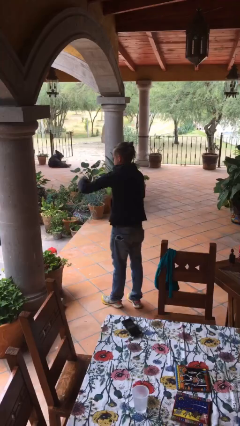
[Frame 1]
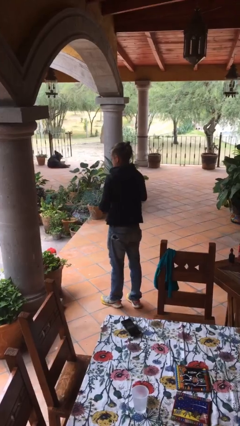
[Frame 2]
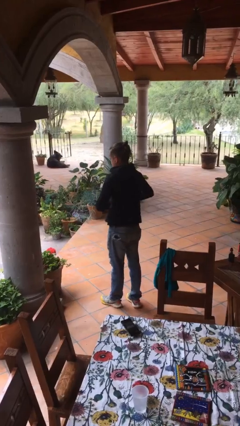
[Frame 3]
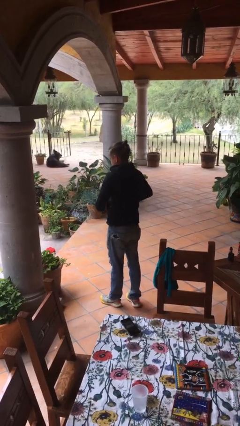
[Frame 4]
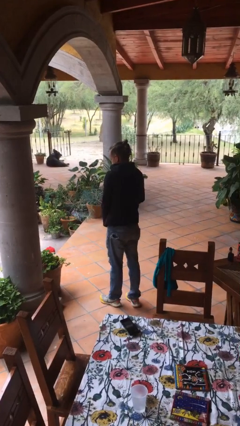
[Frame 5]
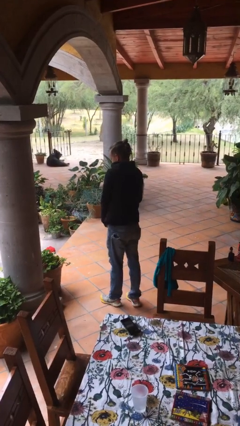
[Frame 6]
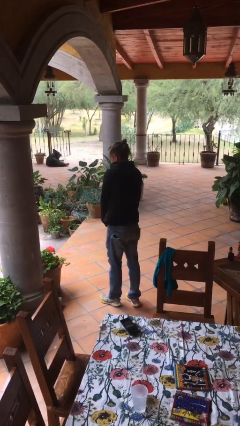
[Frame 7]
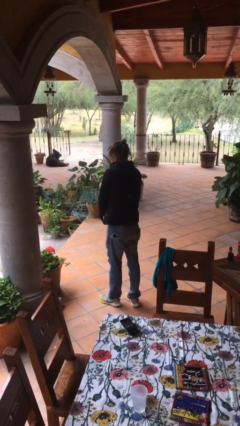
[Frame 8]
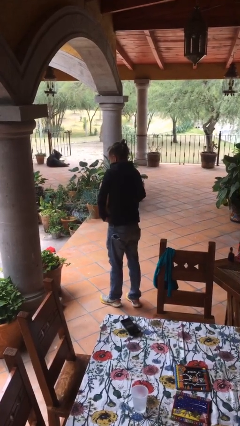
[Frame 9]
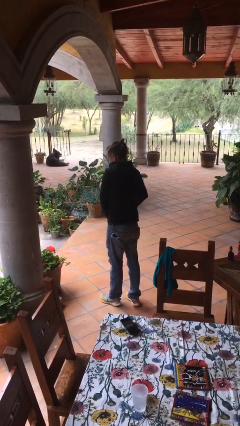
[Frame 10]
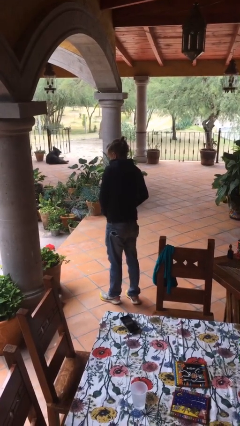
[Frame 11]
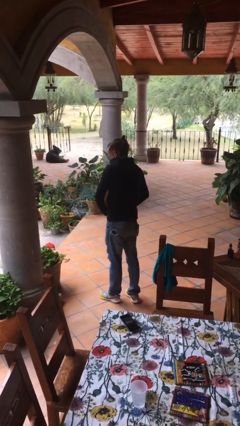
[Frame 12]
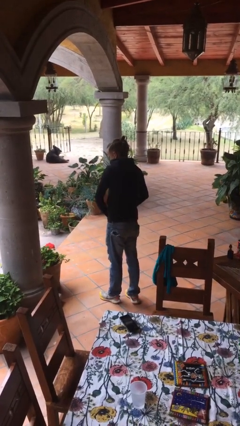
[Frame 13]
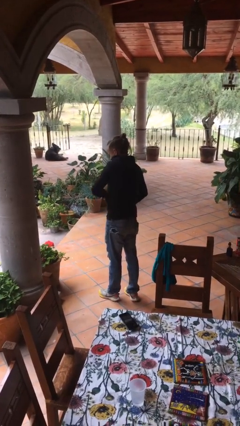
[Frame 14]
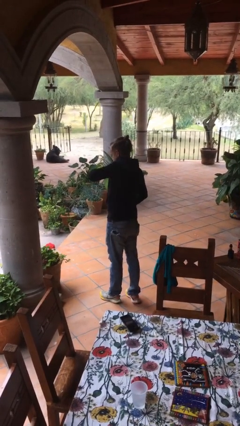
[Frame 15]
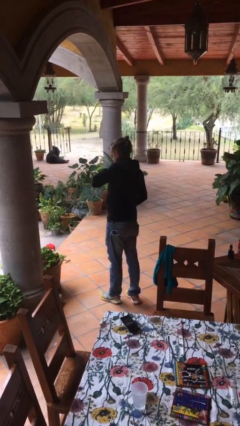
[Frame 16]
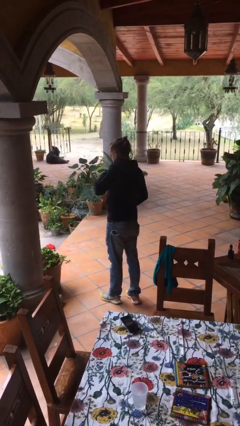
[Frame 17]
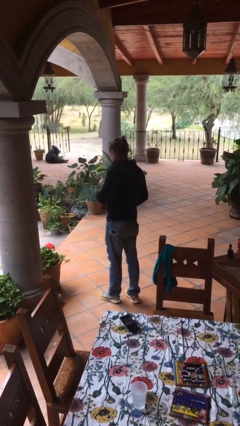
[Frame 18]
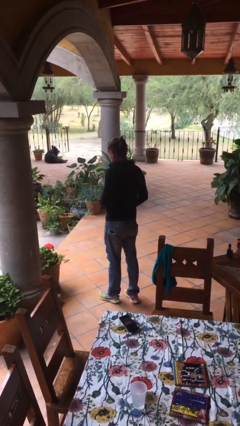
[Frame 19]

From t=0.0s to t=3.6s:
person zips up jacket

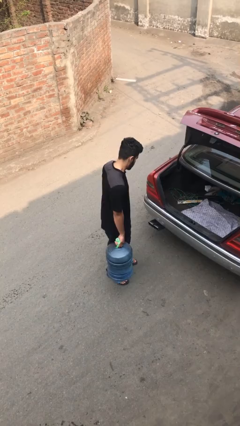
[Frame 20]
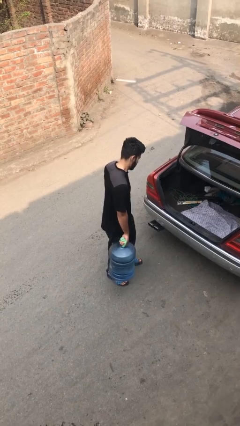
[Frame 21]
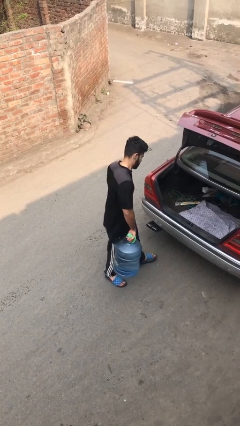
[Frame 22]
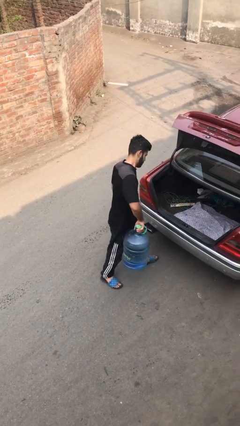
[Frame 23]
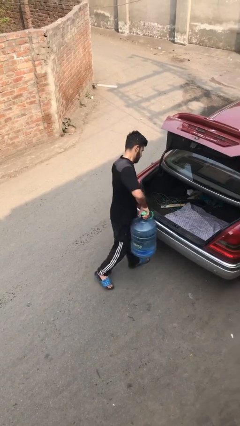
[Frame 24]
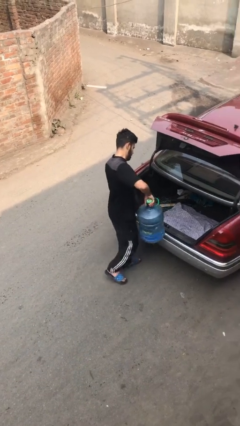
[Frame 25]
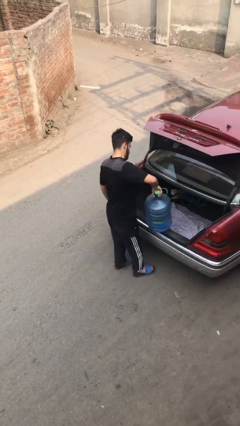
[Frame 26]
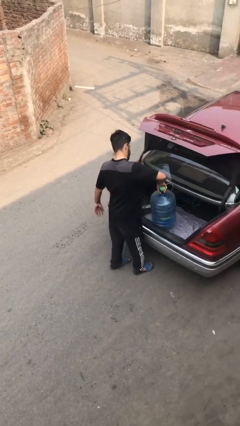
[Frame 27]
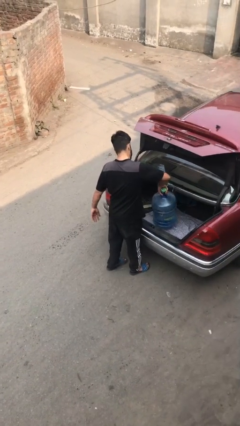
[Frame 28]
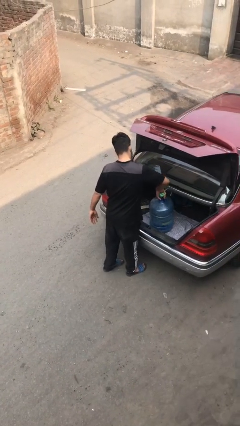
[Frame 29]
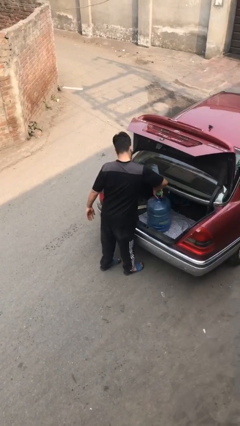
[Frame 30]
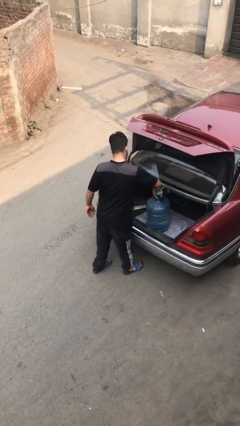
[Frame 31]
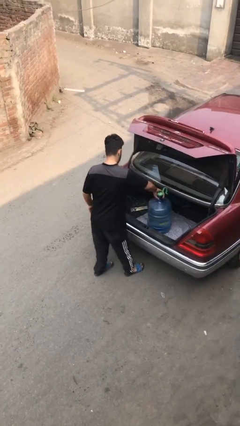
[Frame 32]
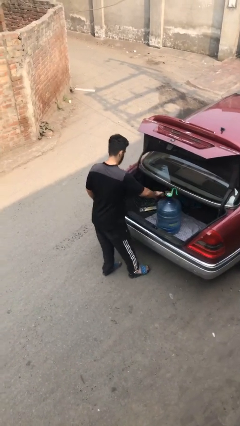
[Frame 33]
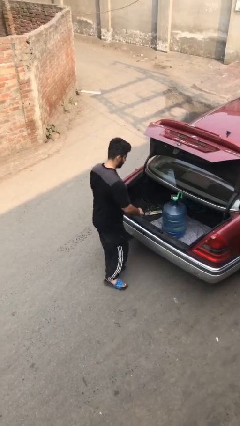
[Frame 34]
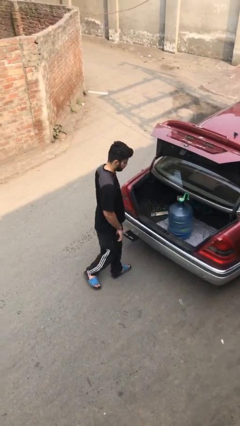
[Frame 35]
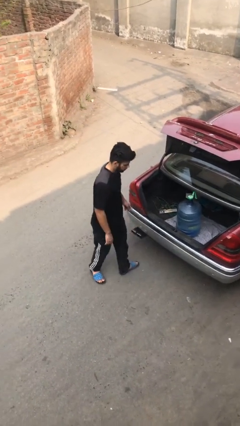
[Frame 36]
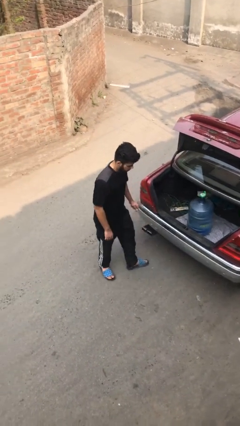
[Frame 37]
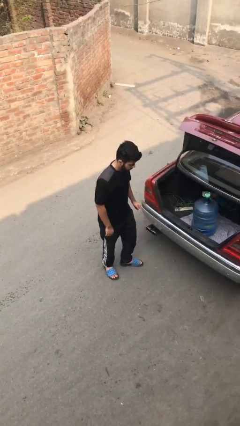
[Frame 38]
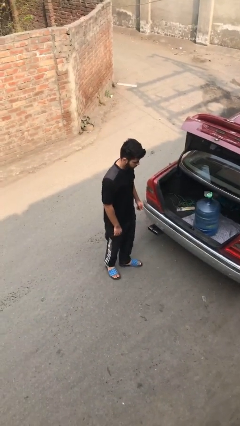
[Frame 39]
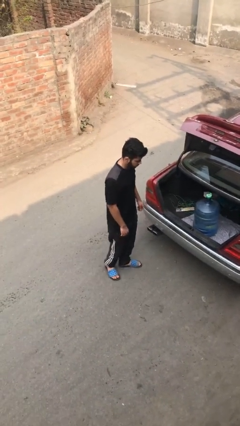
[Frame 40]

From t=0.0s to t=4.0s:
person loads car

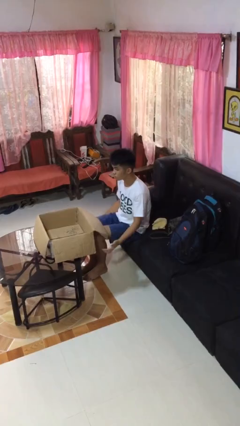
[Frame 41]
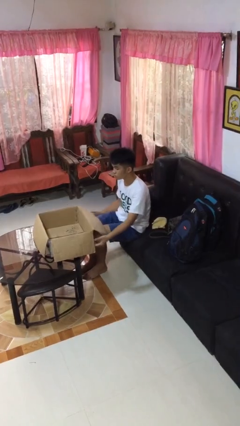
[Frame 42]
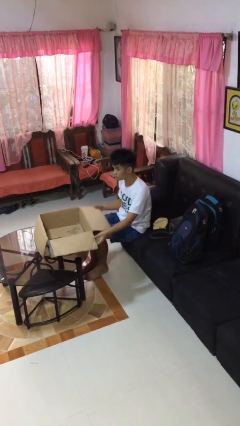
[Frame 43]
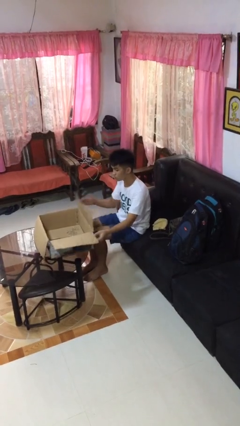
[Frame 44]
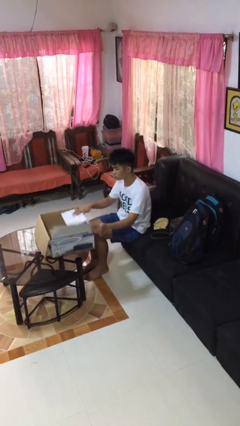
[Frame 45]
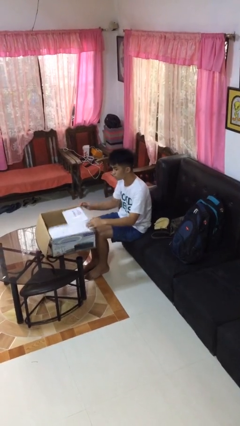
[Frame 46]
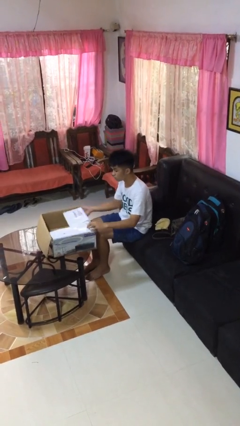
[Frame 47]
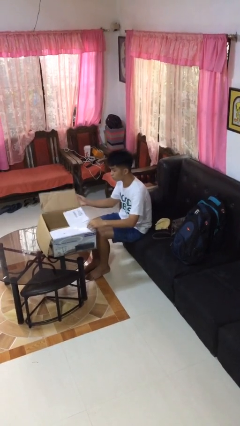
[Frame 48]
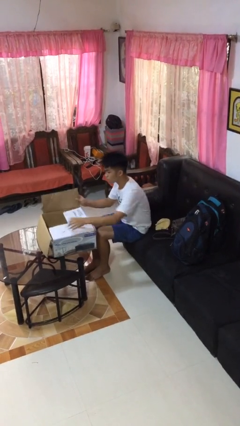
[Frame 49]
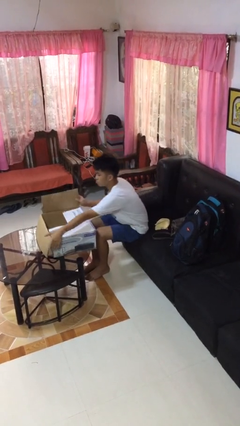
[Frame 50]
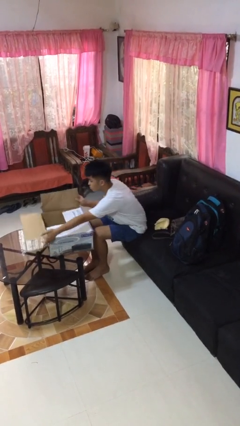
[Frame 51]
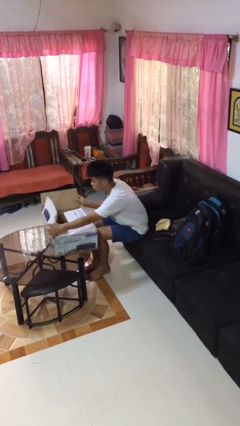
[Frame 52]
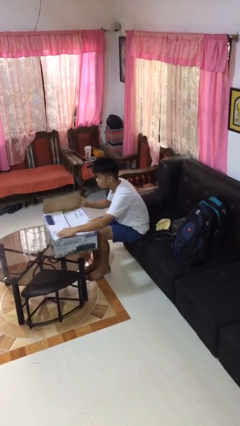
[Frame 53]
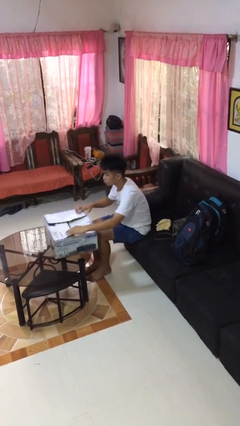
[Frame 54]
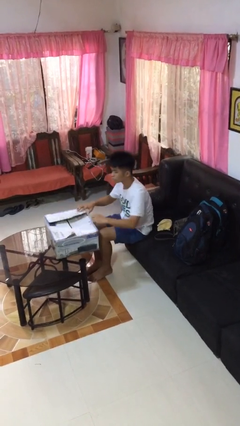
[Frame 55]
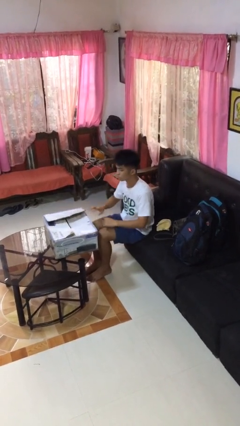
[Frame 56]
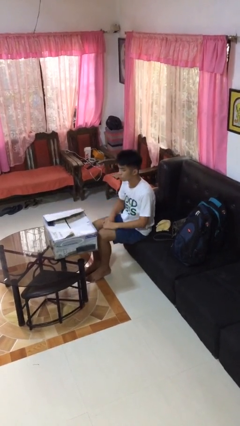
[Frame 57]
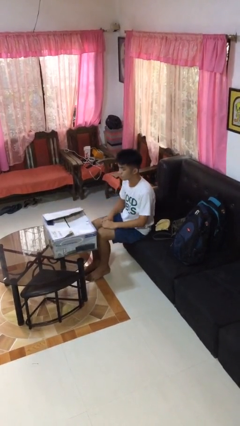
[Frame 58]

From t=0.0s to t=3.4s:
person closes box

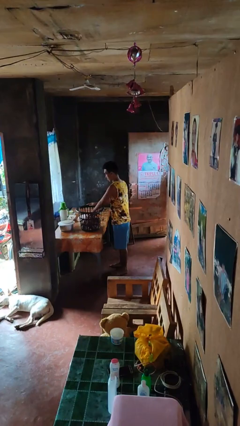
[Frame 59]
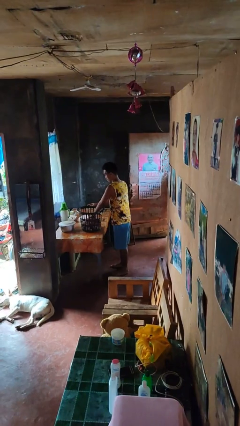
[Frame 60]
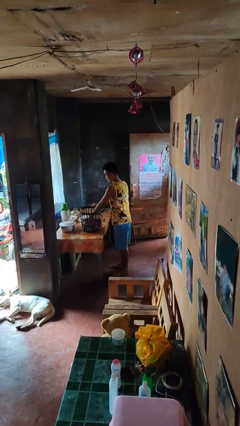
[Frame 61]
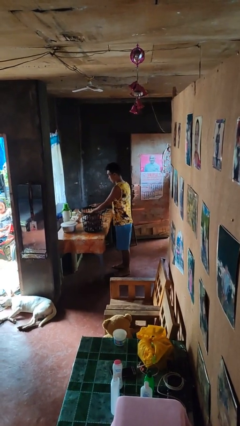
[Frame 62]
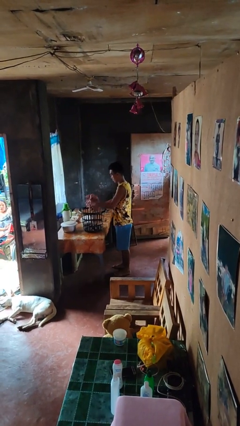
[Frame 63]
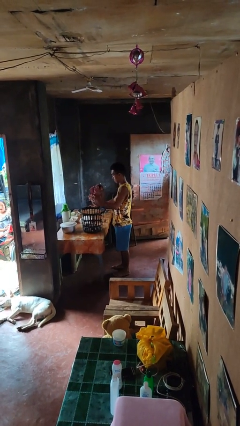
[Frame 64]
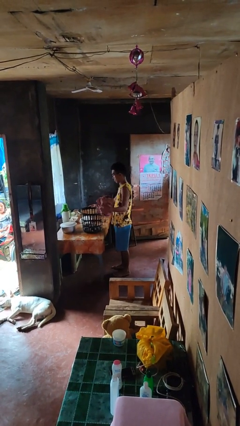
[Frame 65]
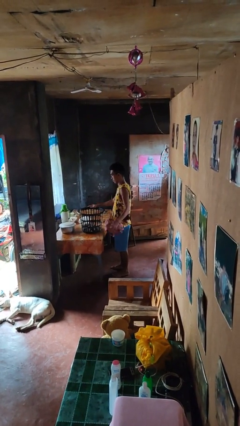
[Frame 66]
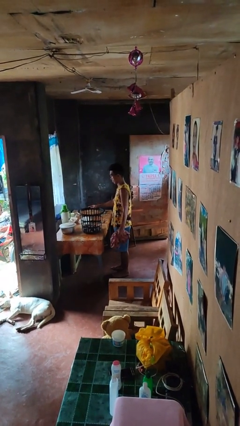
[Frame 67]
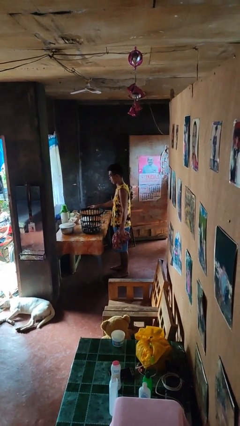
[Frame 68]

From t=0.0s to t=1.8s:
person takes object from basket

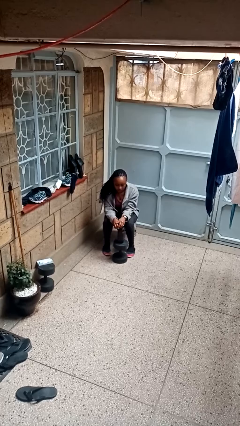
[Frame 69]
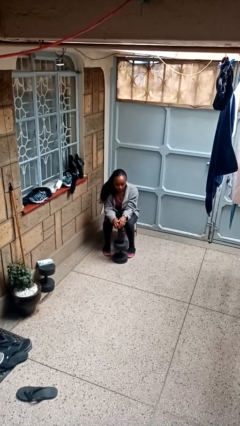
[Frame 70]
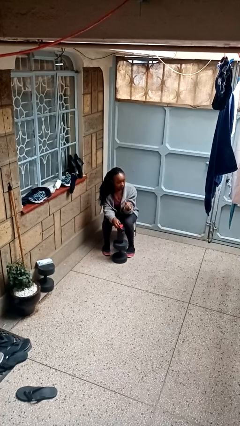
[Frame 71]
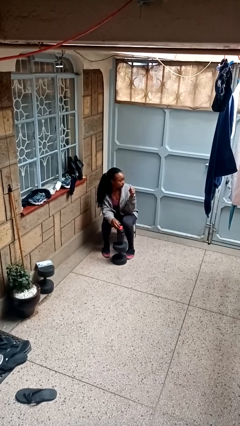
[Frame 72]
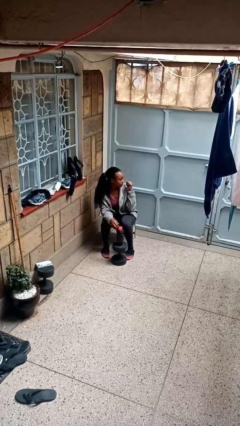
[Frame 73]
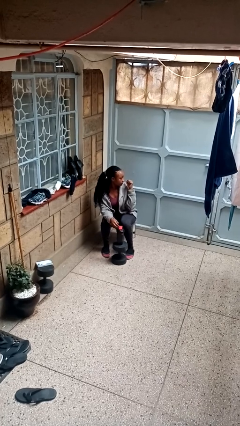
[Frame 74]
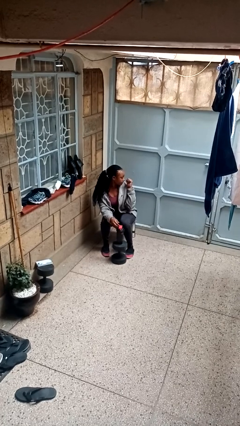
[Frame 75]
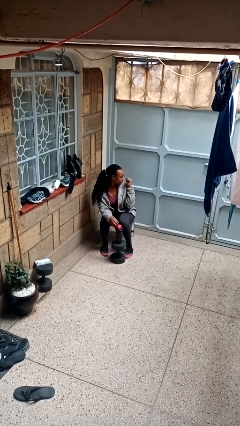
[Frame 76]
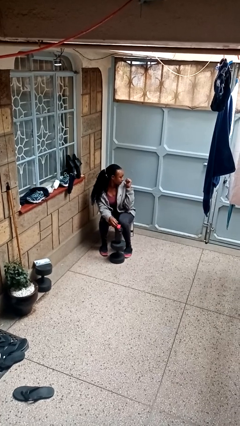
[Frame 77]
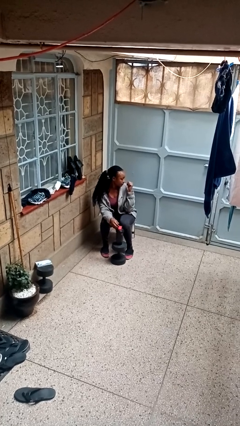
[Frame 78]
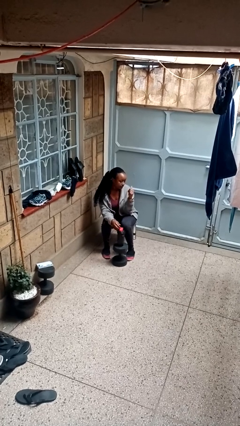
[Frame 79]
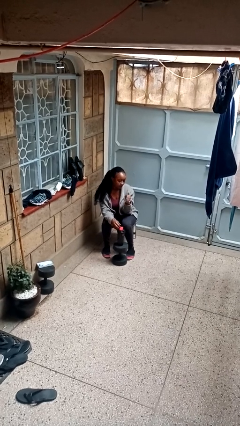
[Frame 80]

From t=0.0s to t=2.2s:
person gestures behind me

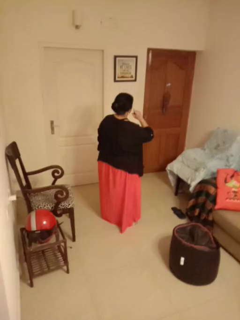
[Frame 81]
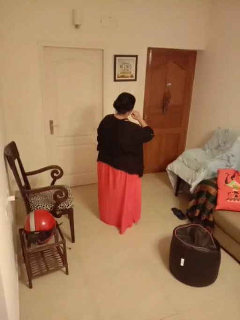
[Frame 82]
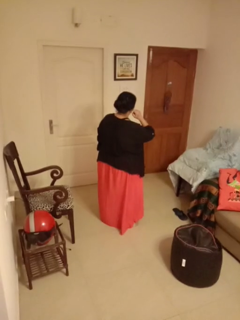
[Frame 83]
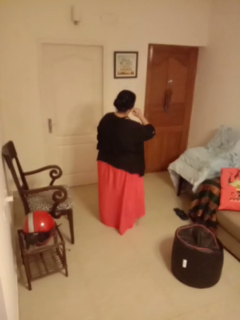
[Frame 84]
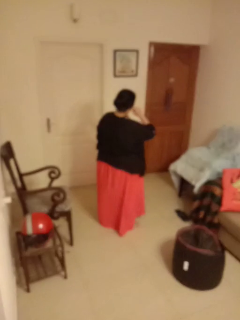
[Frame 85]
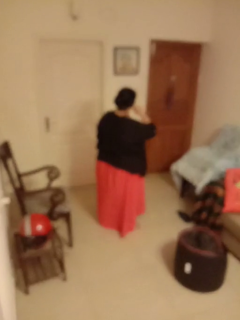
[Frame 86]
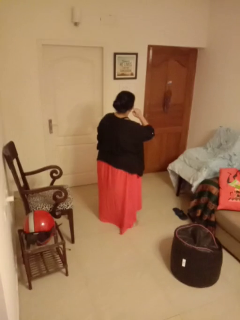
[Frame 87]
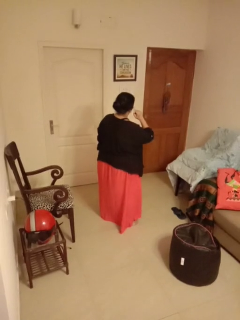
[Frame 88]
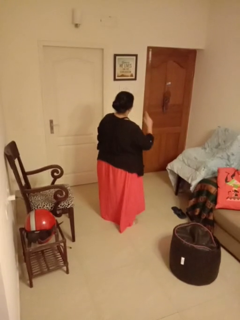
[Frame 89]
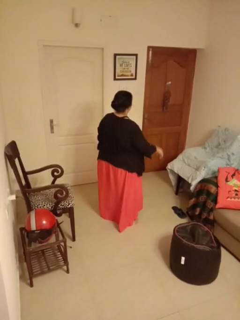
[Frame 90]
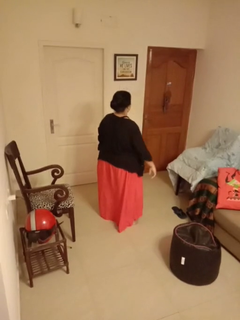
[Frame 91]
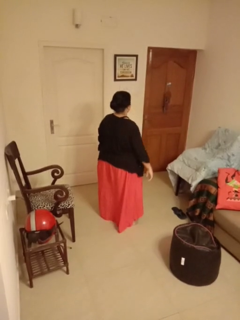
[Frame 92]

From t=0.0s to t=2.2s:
person gestures listen closely

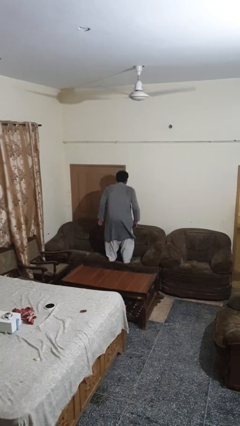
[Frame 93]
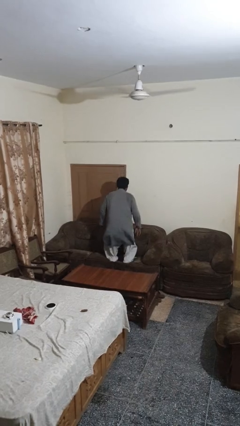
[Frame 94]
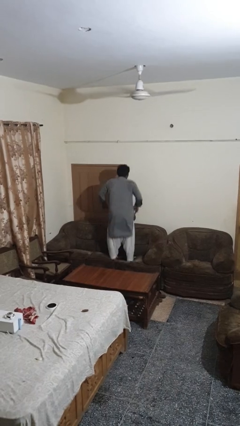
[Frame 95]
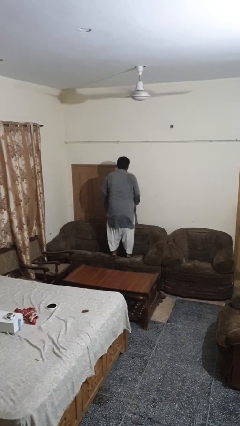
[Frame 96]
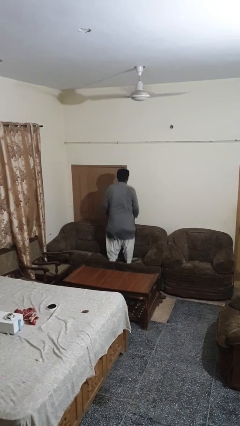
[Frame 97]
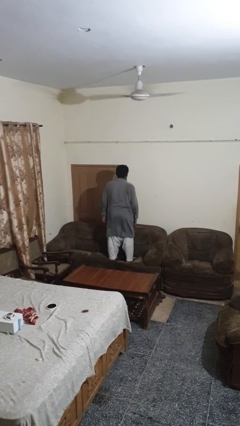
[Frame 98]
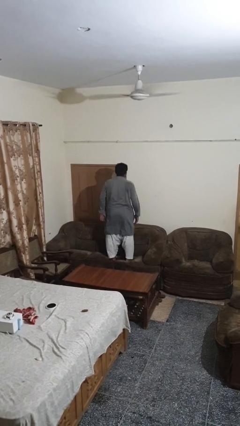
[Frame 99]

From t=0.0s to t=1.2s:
person jumps on couch
